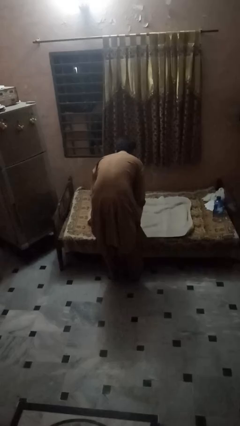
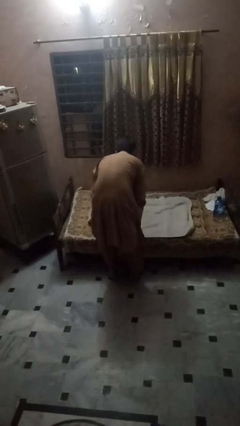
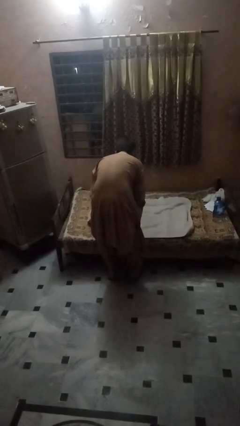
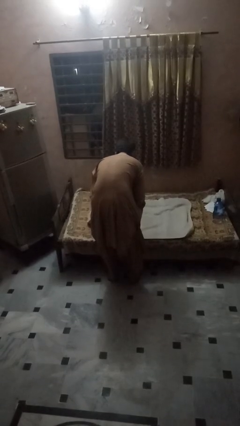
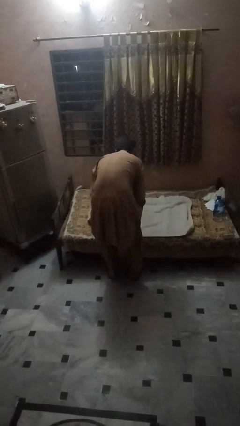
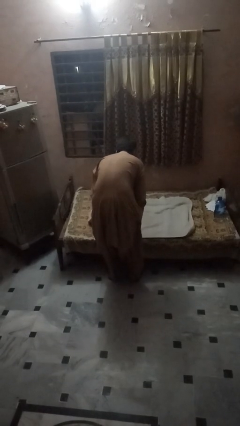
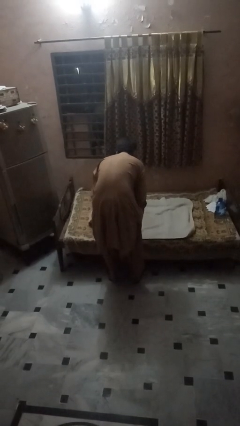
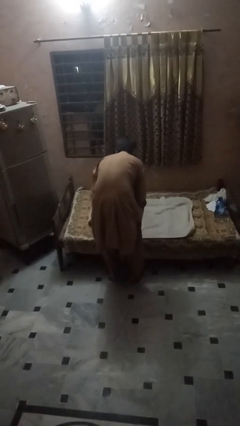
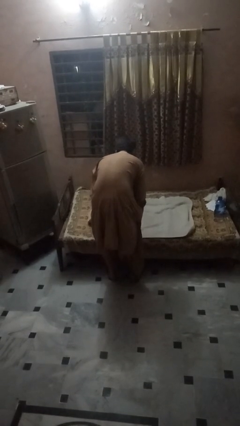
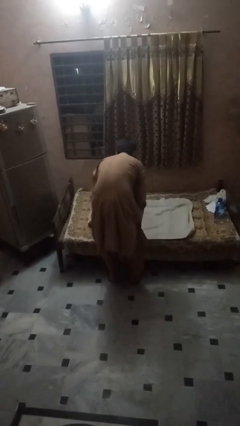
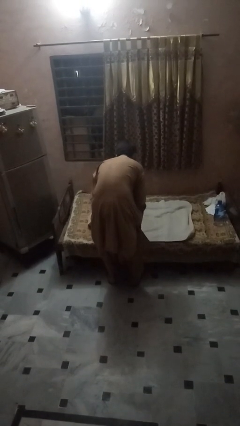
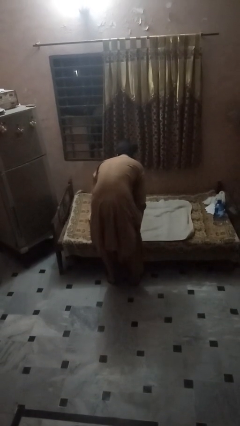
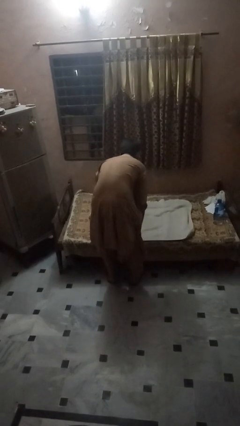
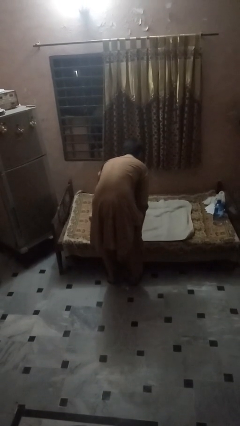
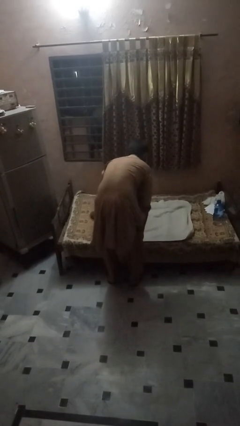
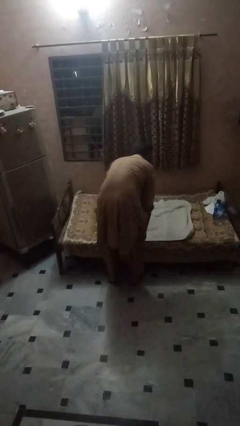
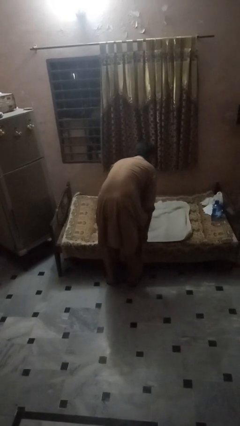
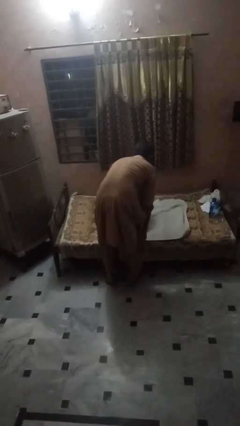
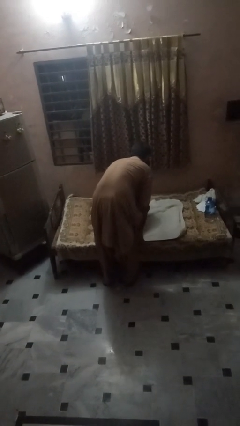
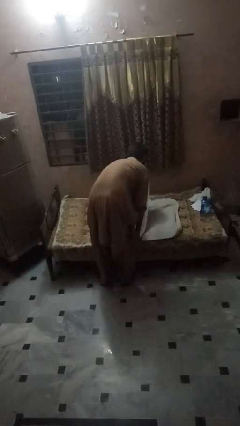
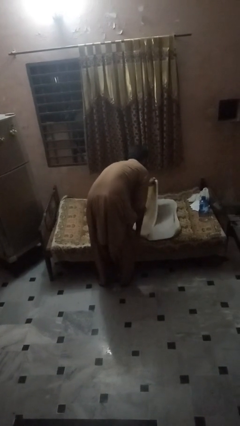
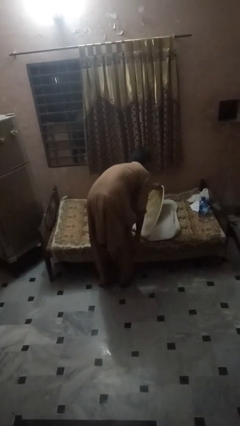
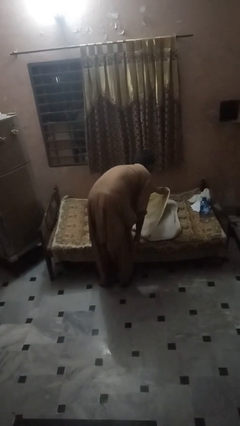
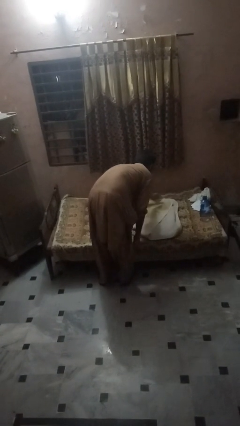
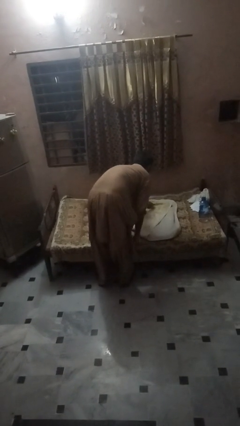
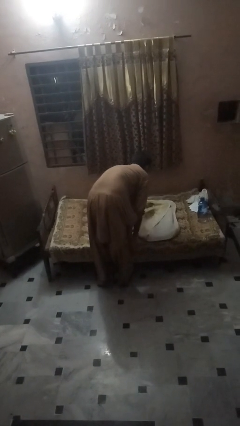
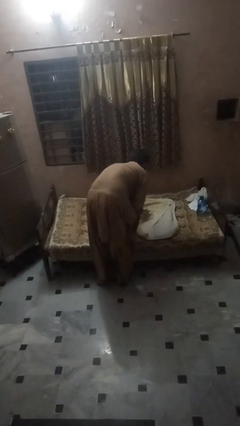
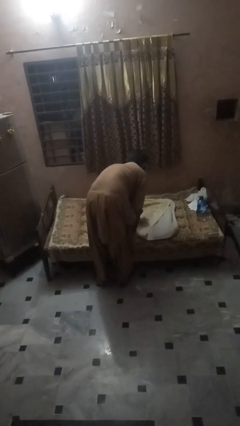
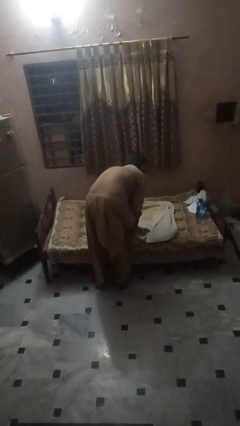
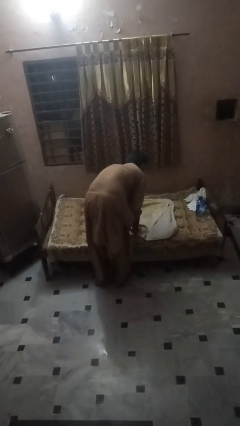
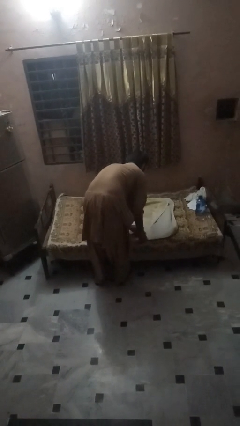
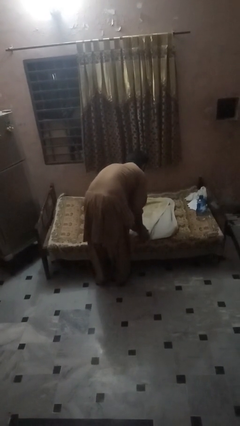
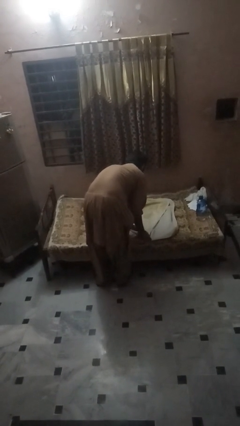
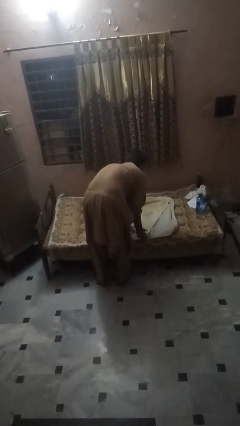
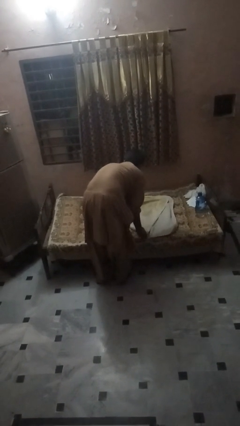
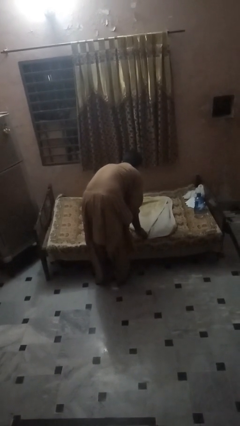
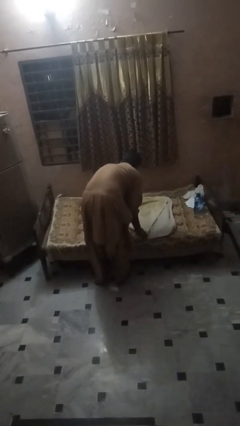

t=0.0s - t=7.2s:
person folds blanket

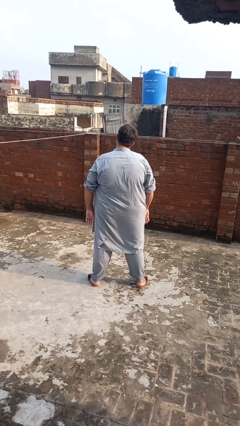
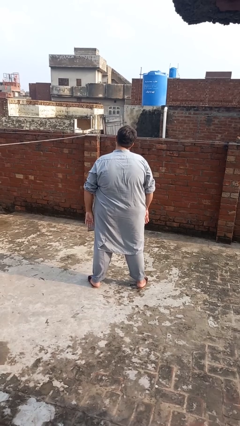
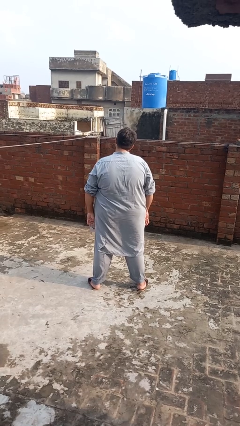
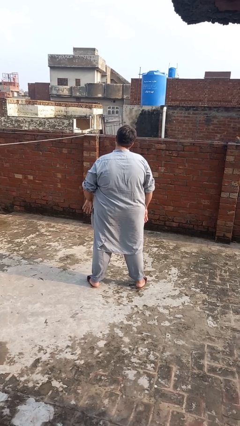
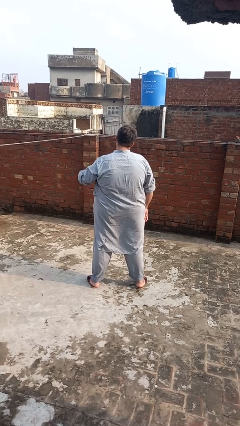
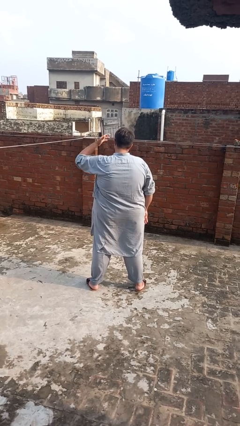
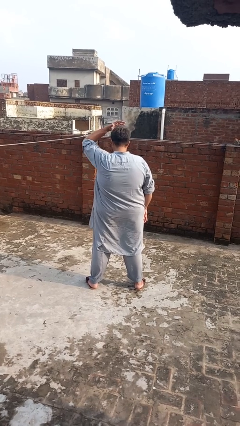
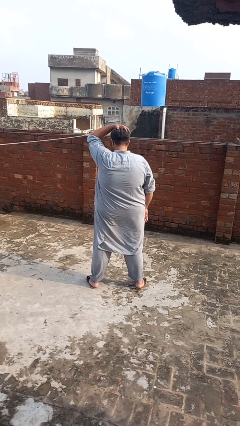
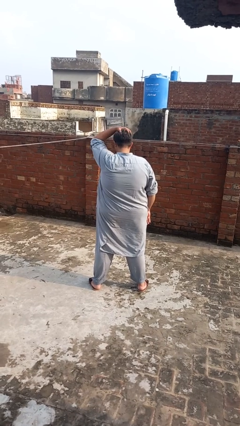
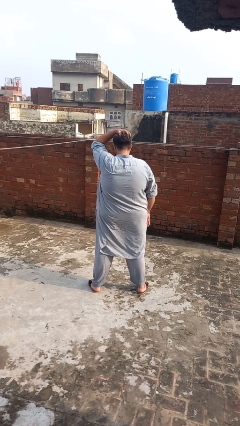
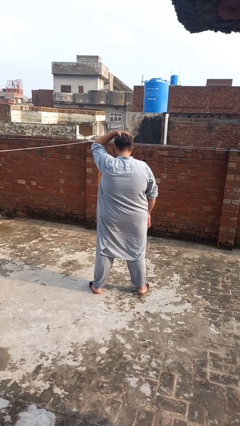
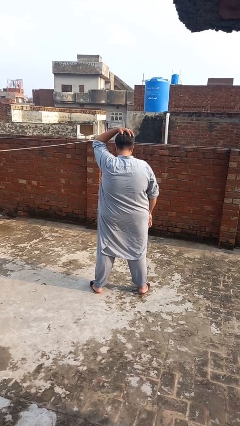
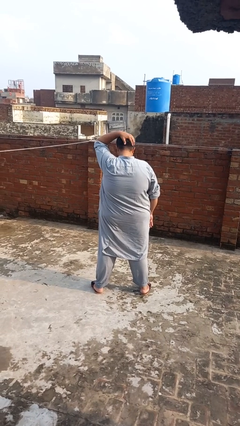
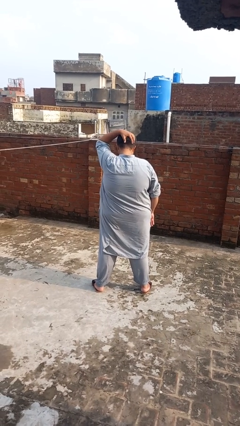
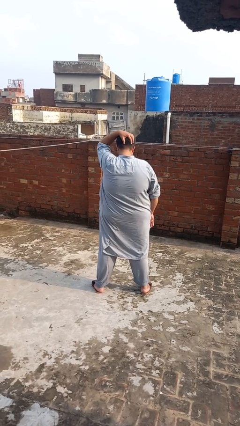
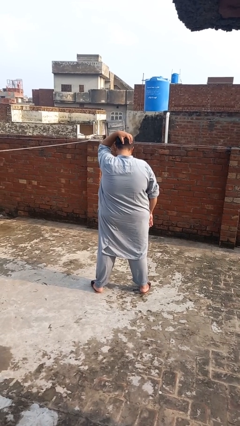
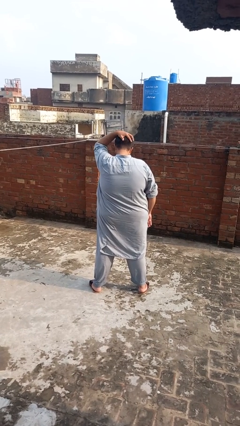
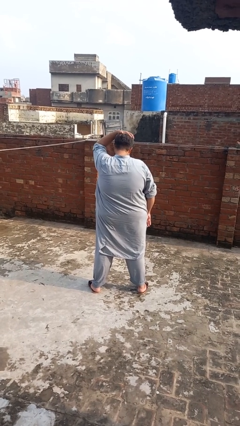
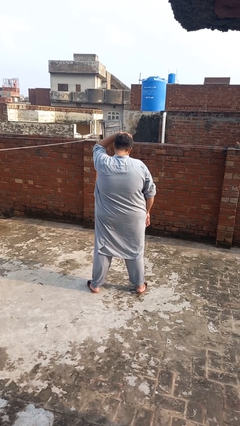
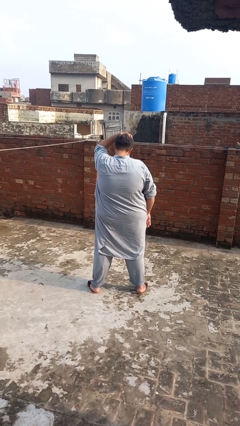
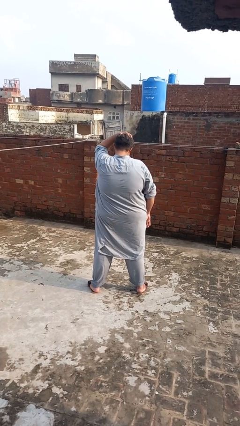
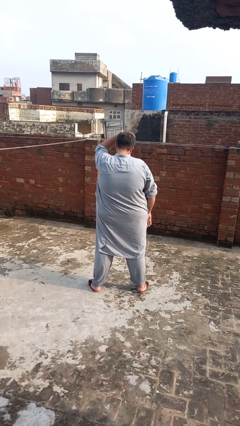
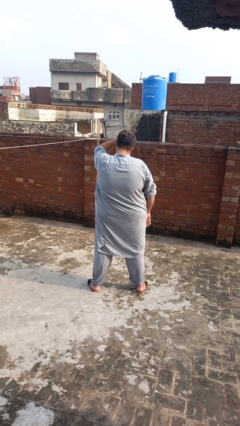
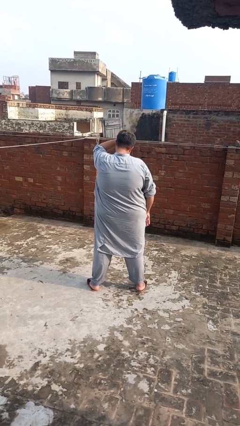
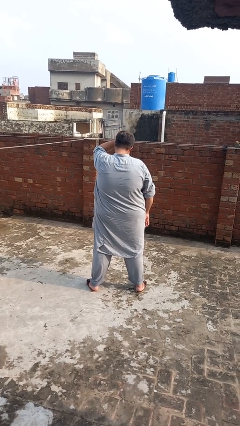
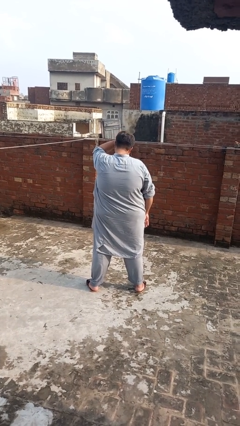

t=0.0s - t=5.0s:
person pats head

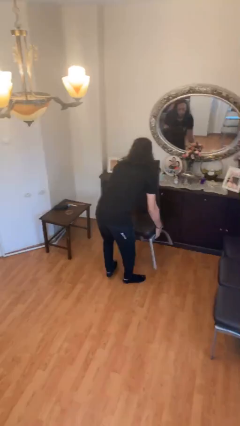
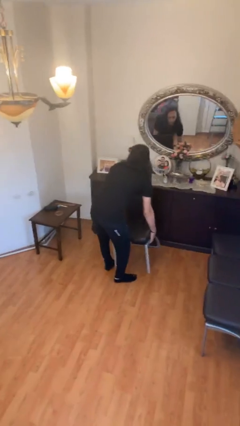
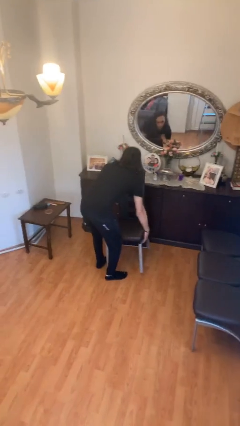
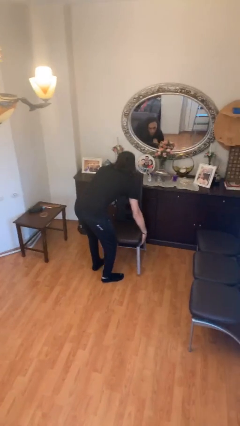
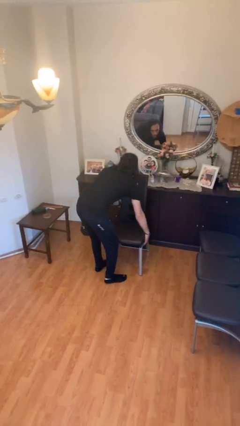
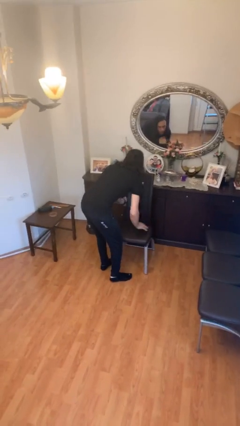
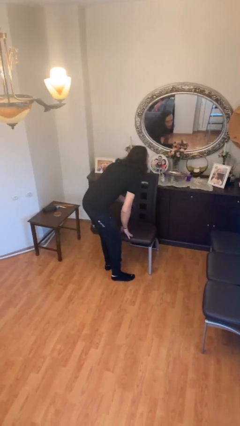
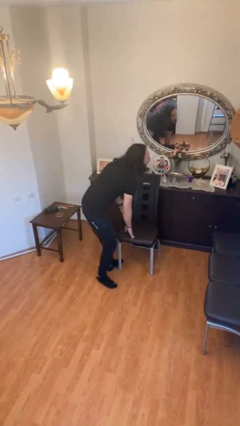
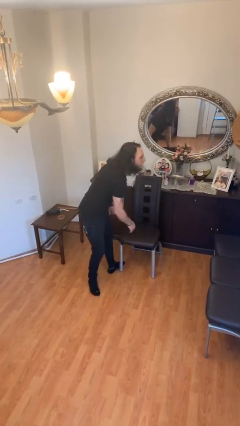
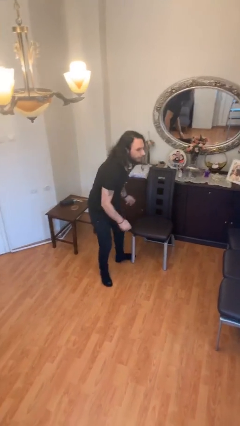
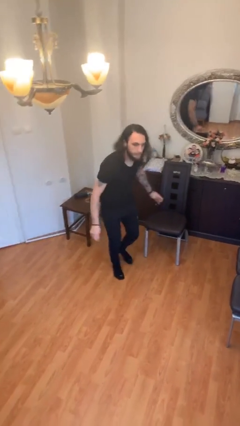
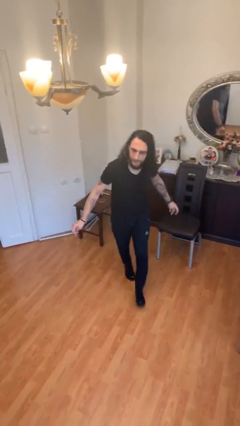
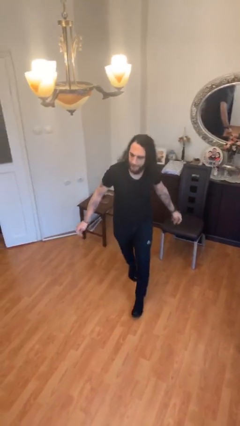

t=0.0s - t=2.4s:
person puts down object on floor

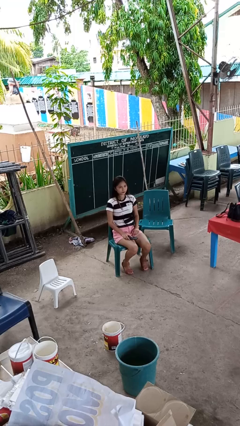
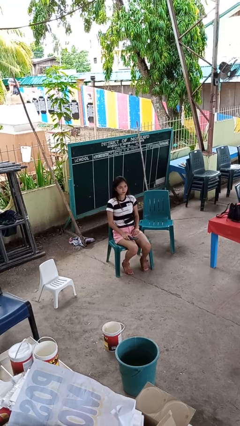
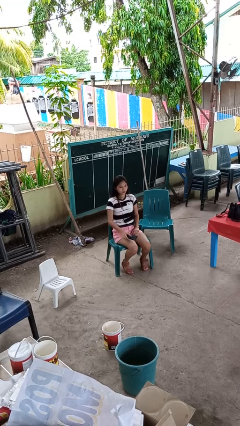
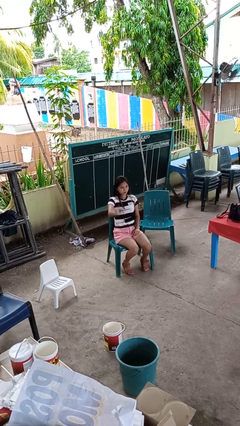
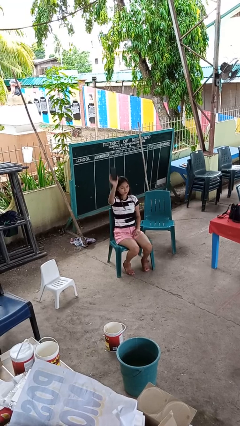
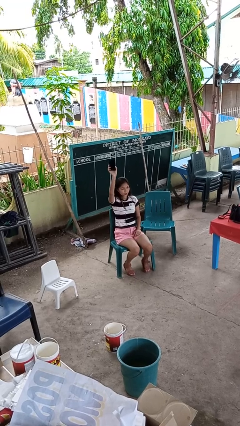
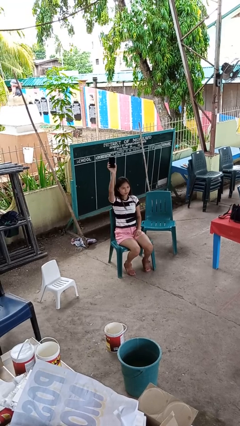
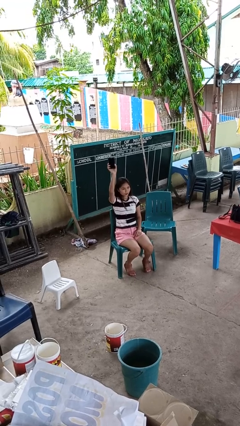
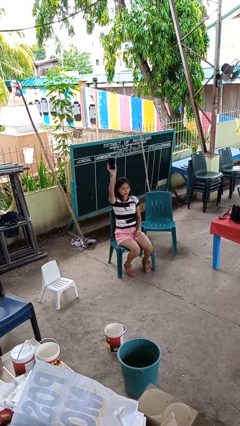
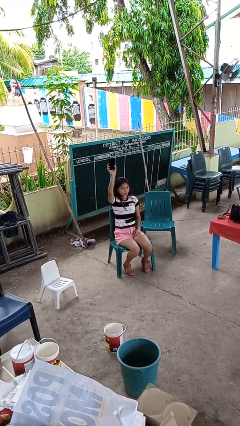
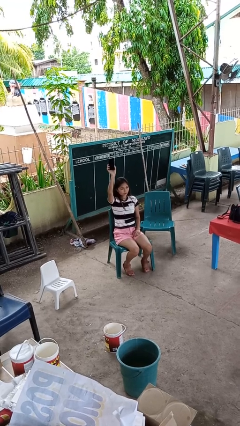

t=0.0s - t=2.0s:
person holds object above head

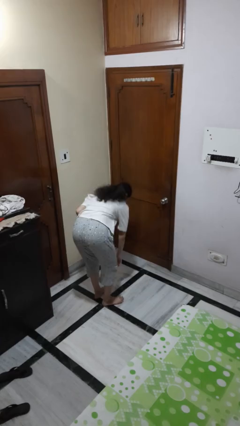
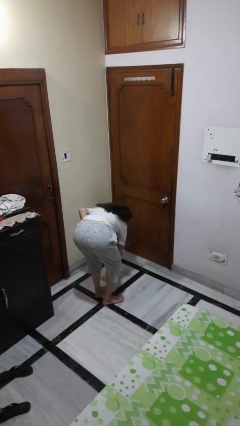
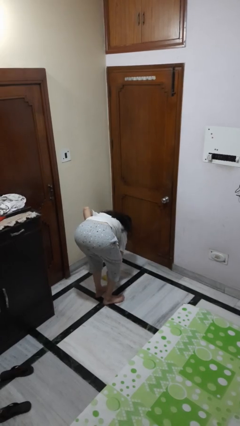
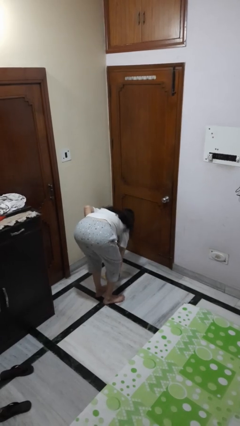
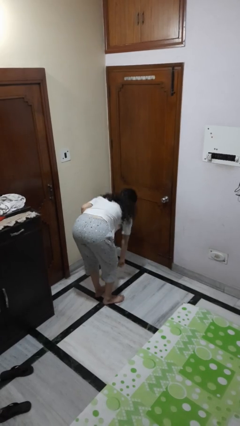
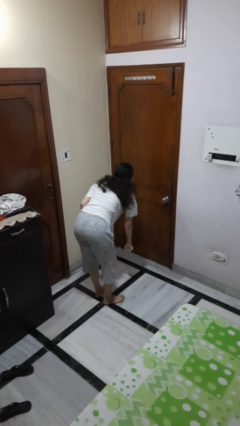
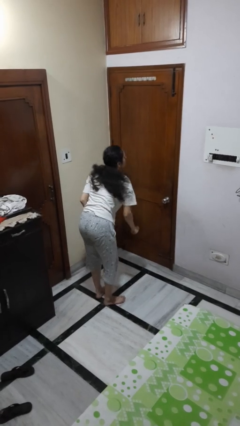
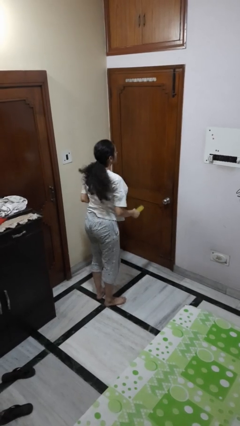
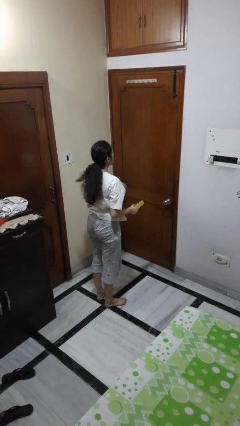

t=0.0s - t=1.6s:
person picks up object from floor
